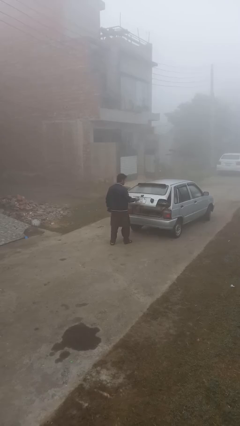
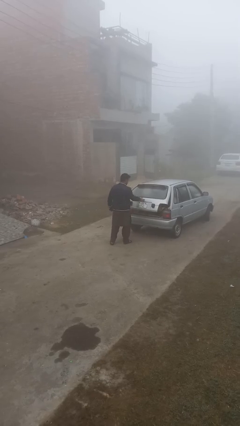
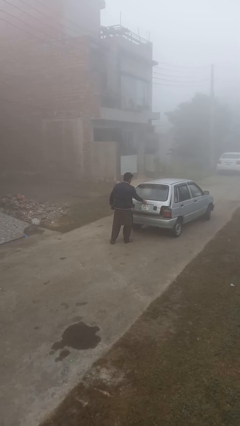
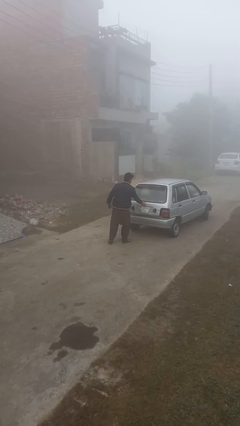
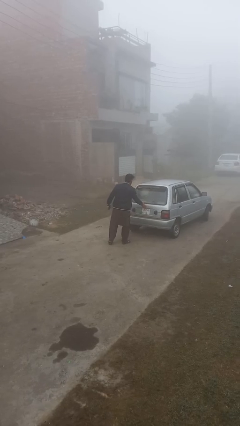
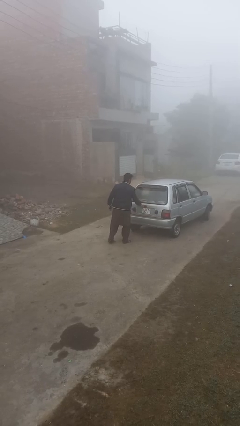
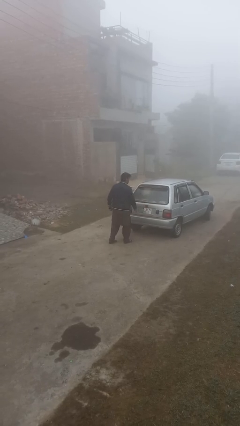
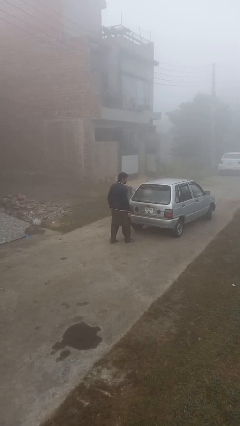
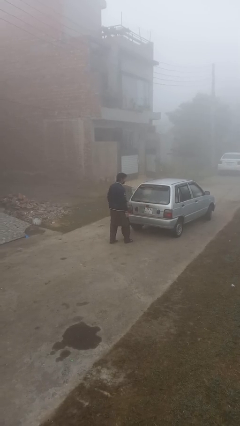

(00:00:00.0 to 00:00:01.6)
person closes car trunk

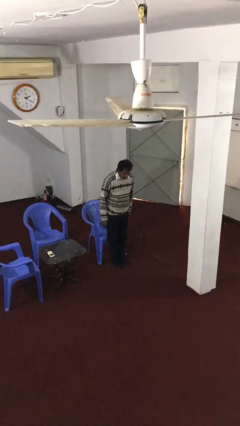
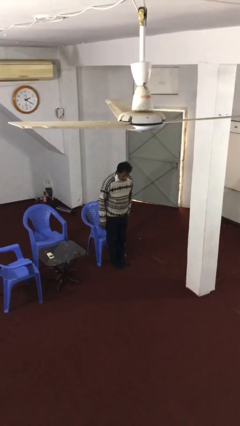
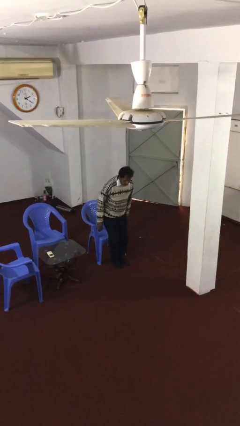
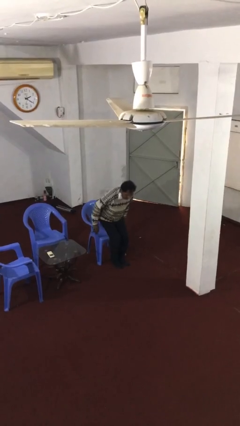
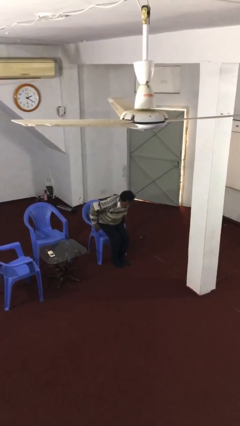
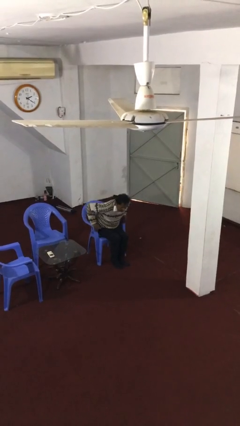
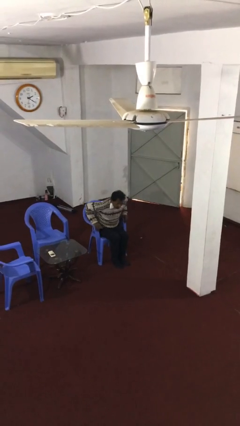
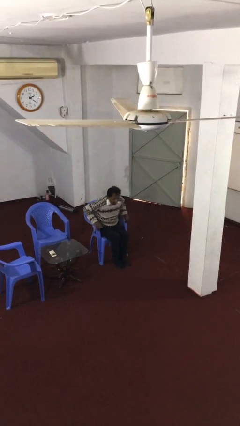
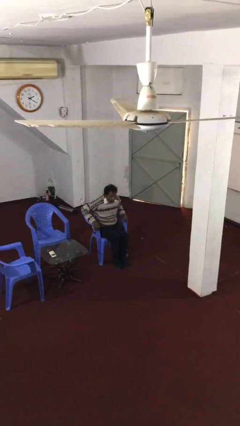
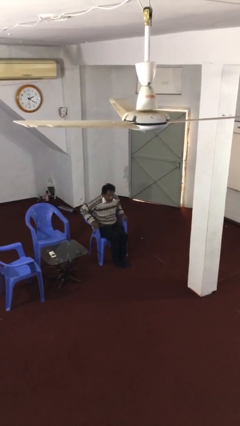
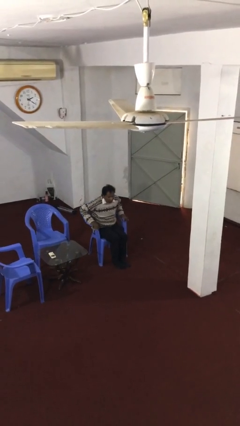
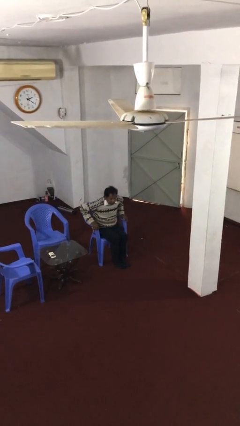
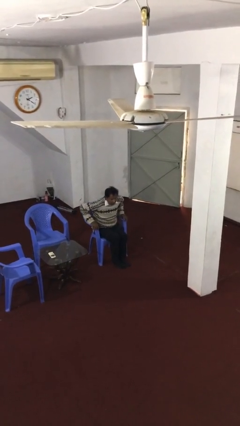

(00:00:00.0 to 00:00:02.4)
person sits down

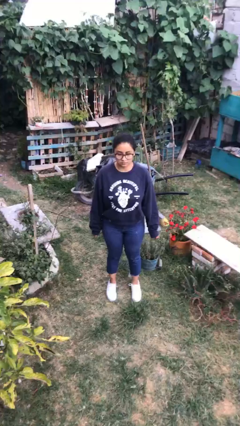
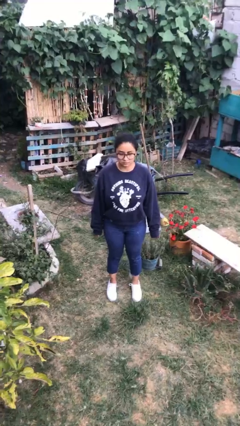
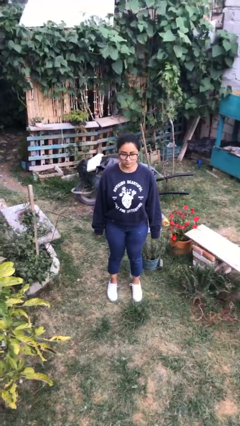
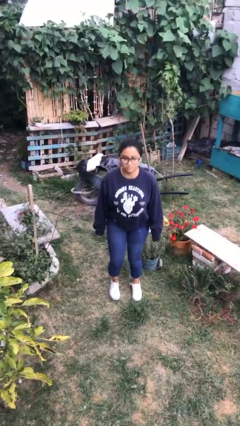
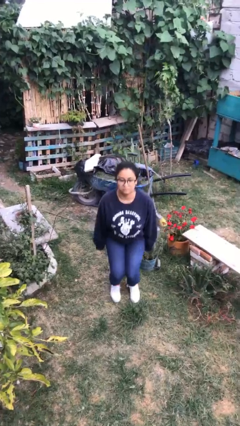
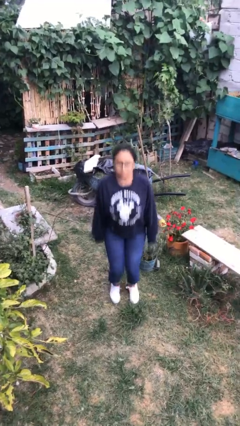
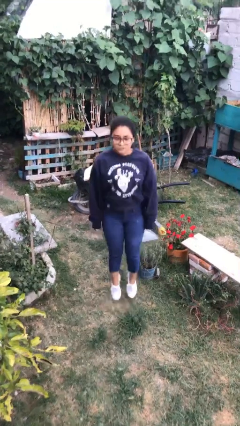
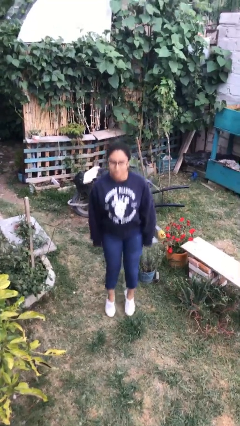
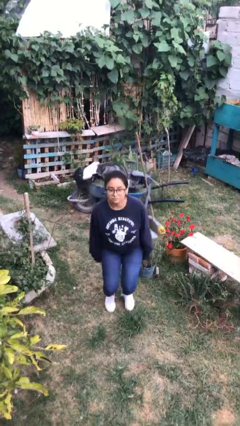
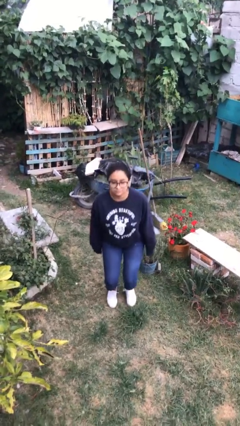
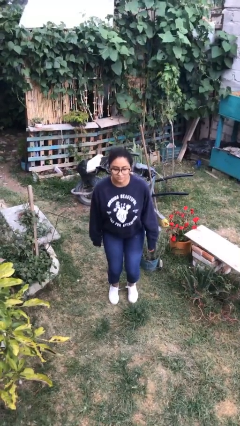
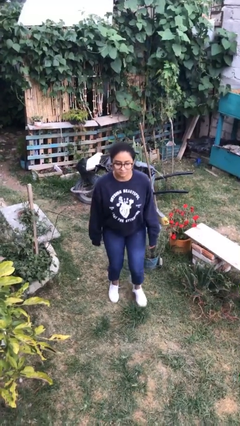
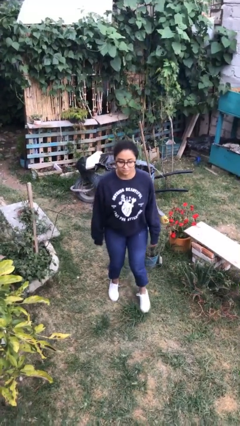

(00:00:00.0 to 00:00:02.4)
person jumps

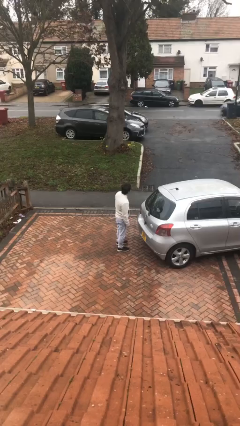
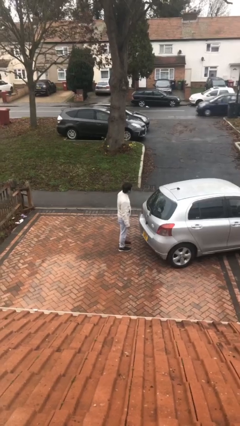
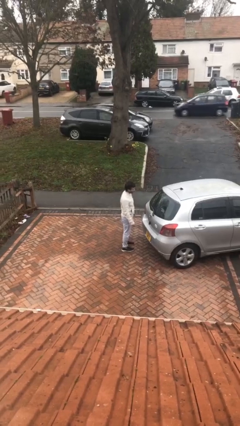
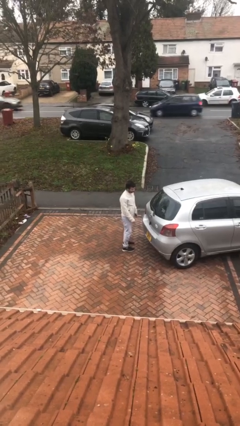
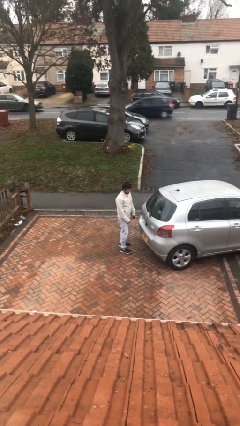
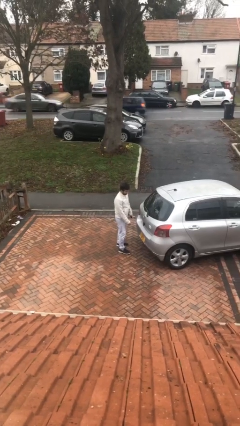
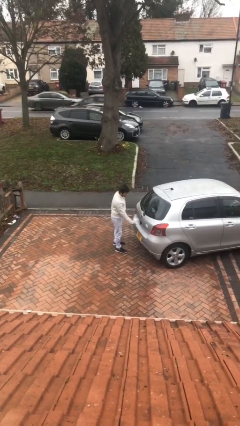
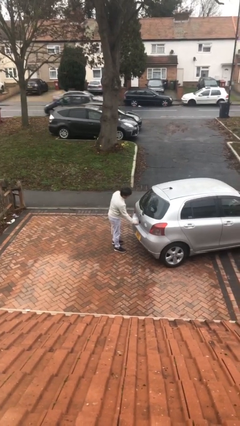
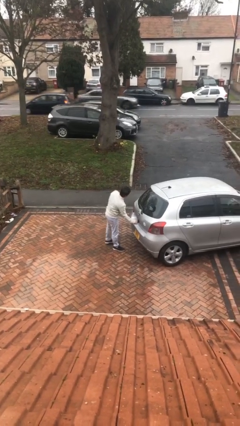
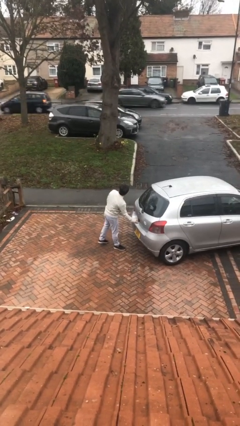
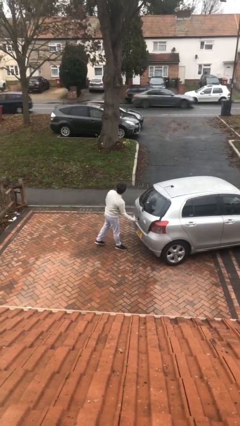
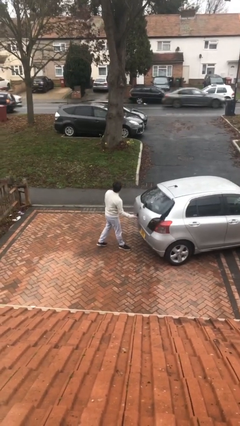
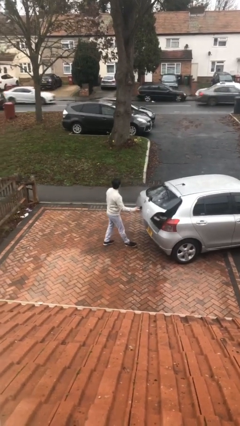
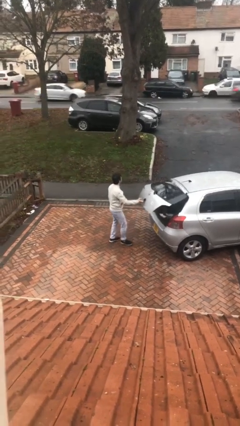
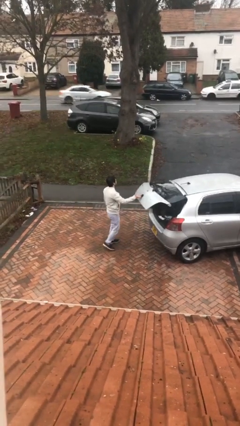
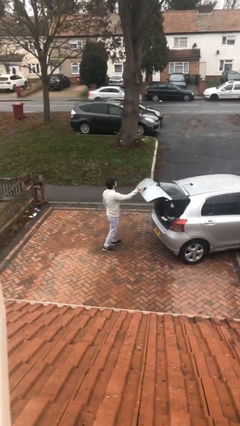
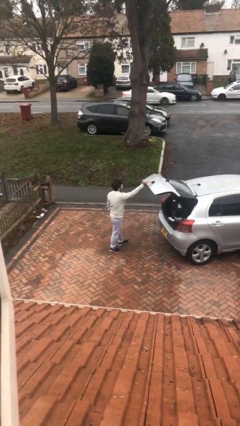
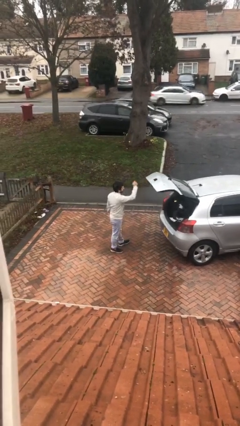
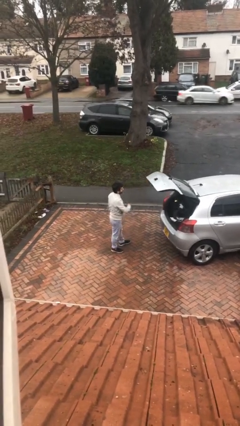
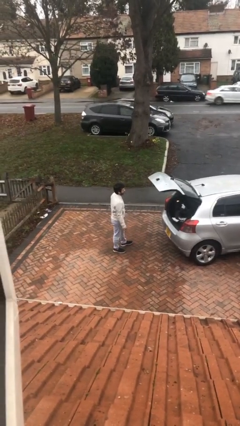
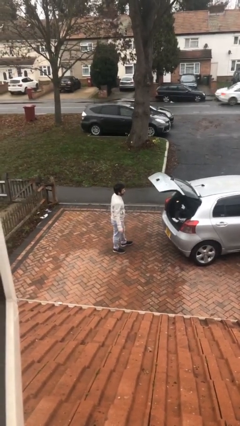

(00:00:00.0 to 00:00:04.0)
person opens car trunk

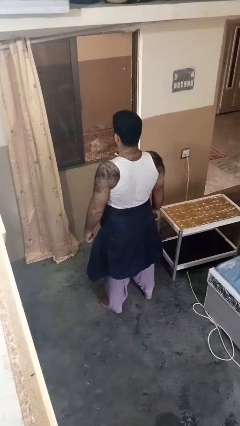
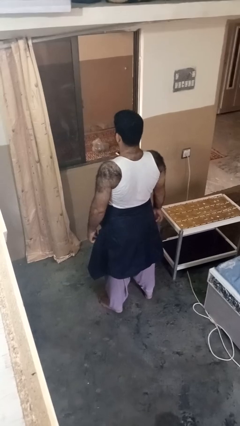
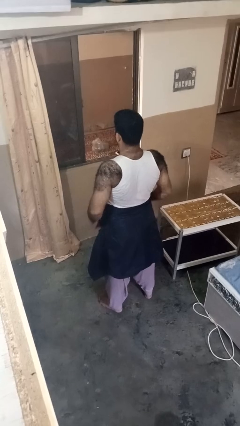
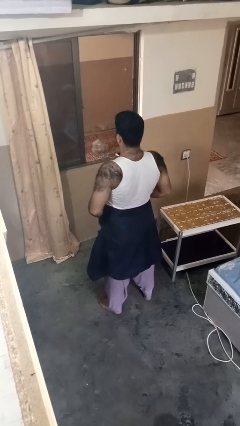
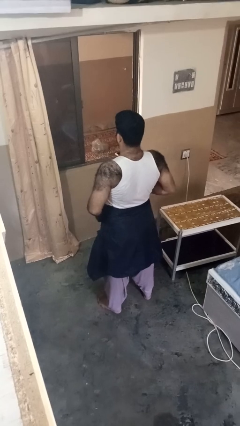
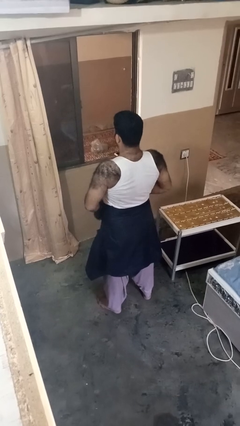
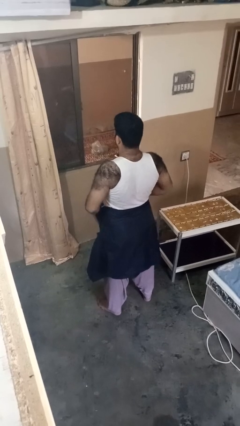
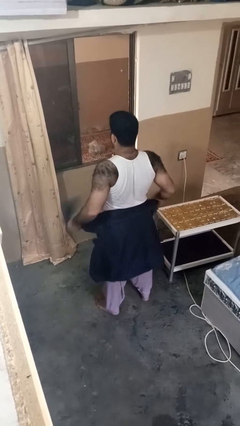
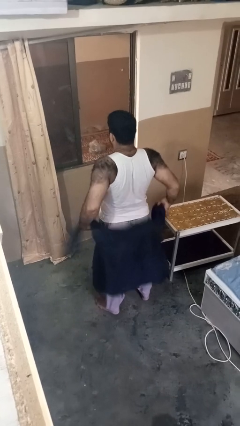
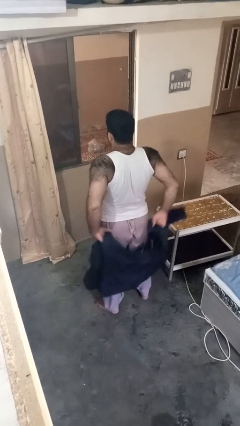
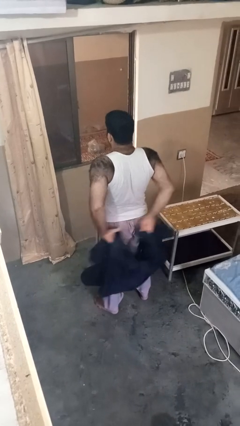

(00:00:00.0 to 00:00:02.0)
person unties jacket around waist

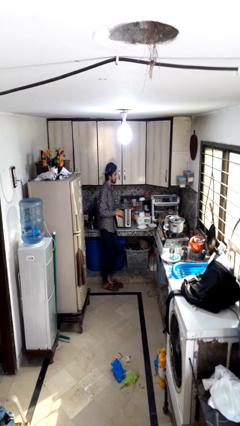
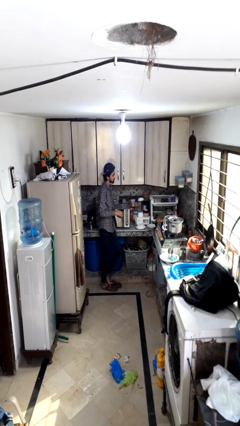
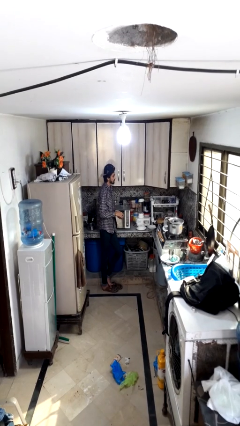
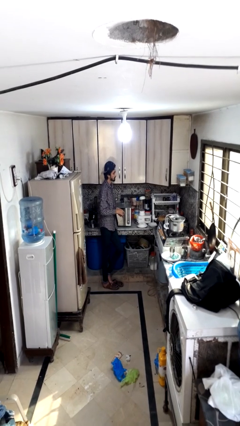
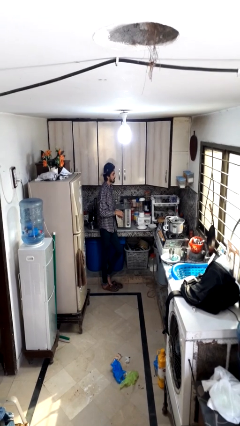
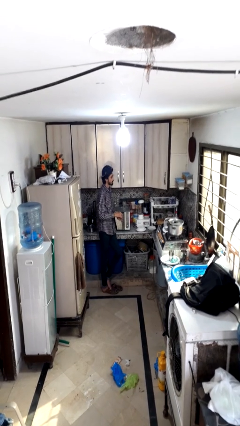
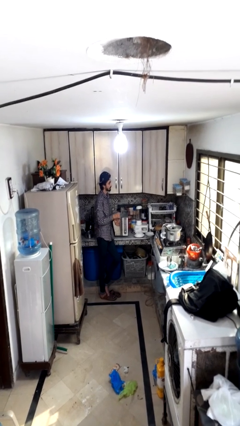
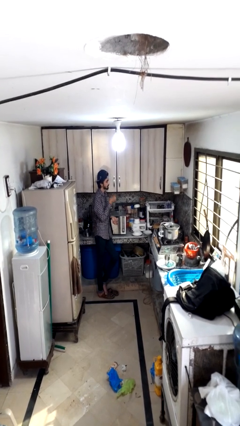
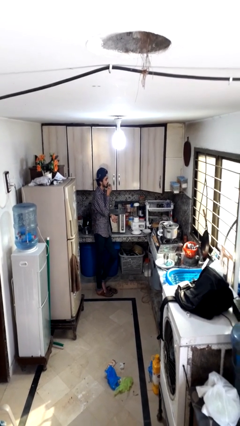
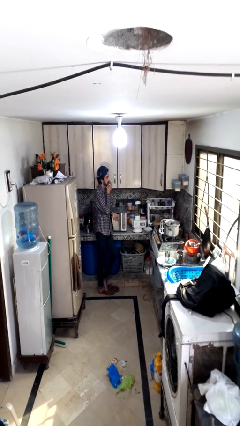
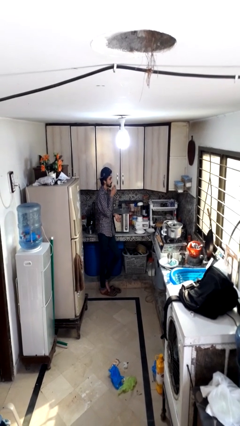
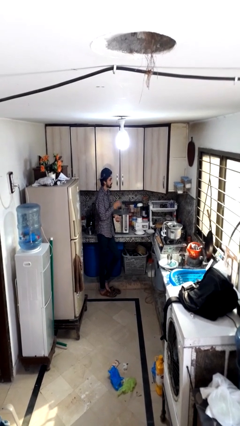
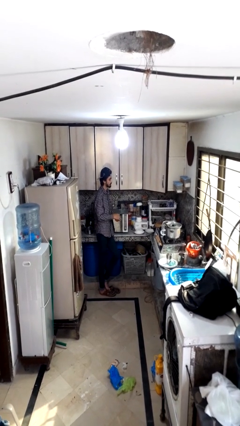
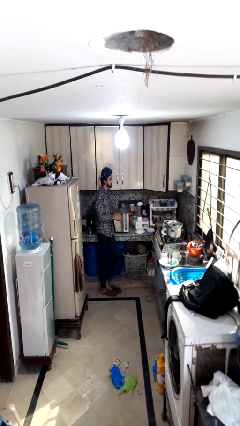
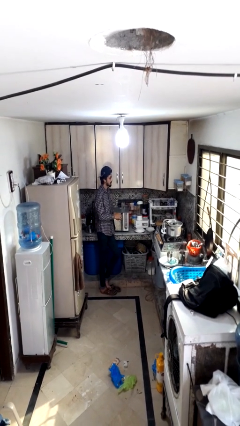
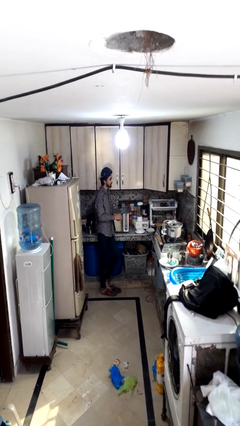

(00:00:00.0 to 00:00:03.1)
person takes medicine pills

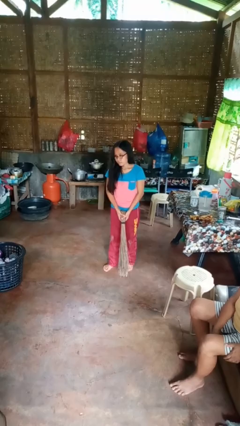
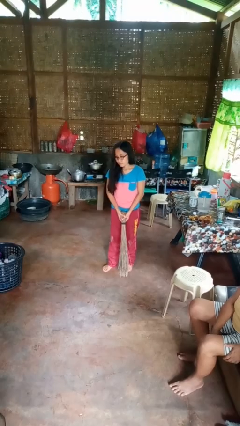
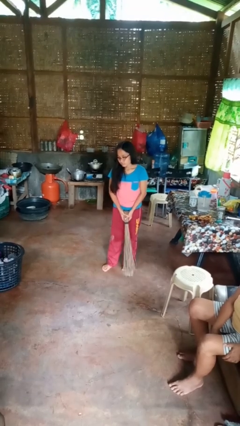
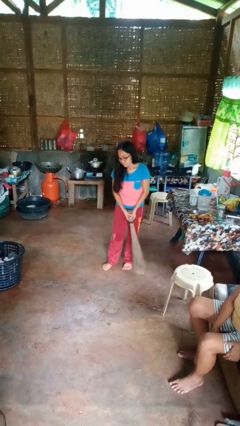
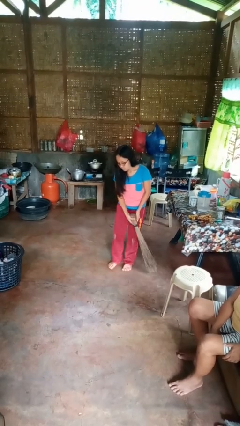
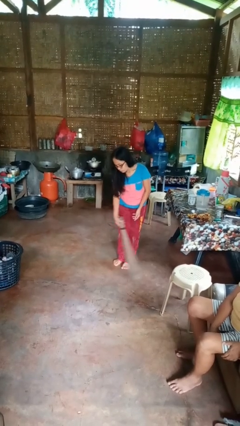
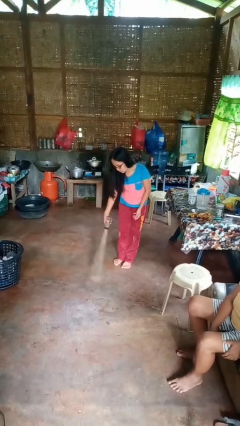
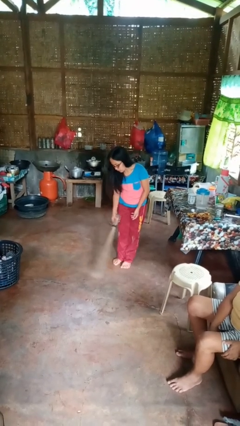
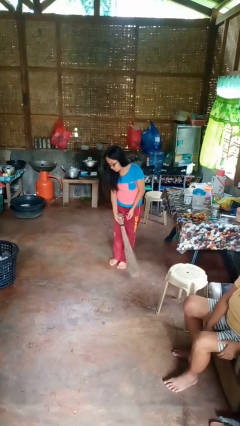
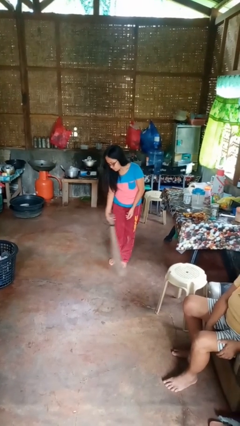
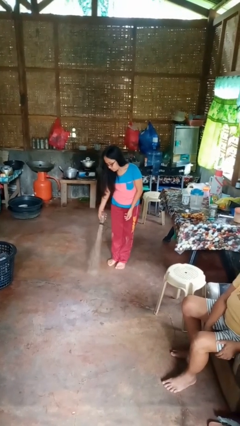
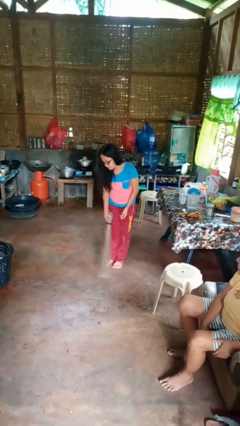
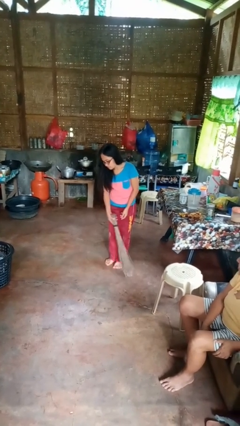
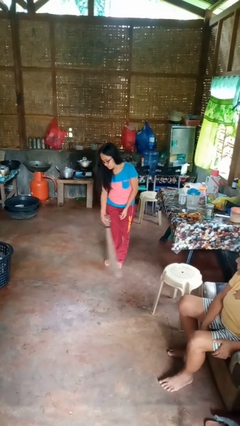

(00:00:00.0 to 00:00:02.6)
person sweeps floor
